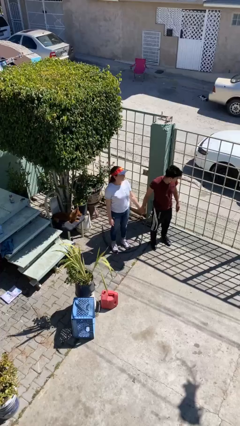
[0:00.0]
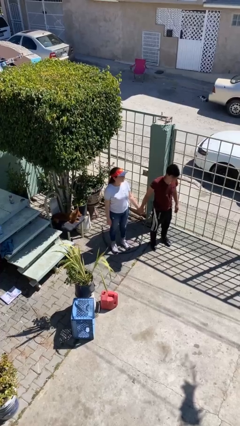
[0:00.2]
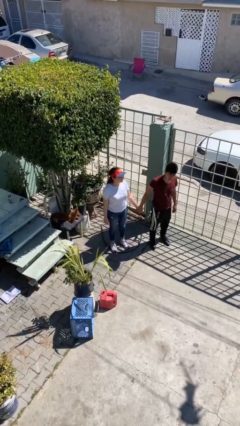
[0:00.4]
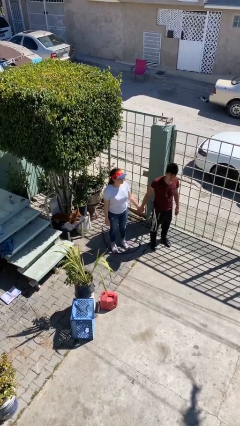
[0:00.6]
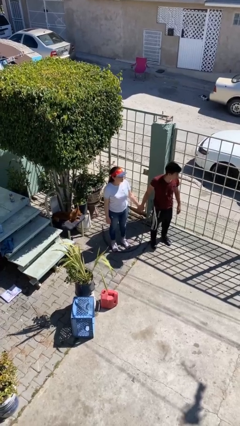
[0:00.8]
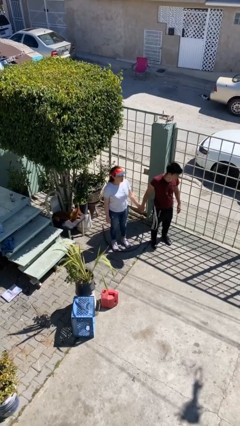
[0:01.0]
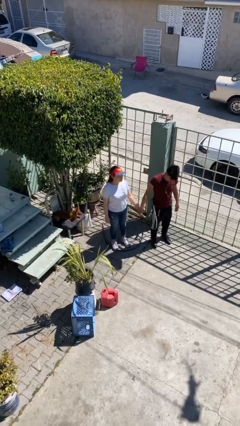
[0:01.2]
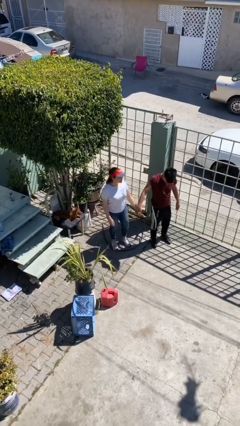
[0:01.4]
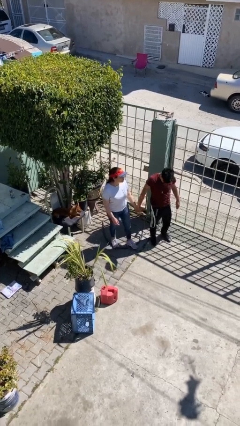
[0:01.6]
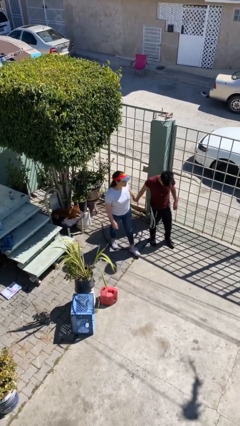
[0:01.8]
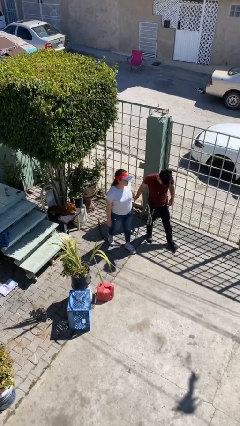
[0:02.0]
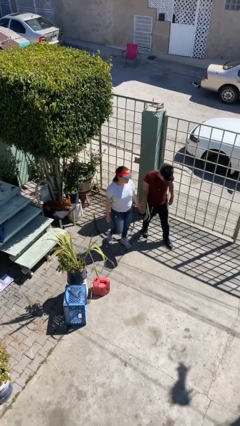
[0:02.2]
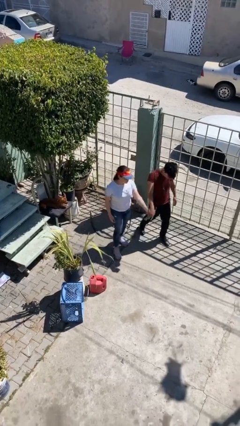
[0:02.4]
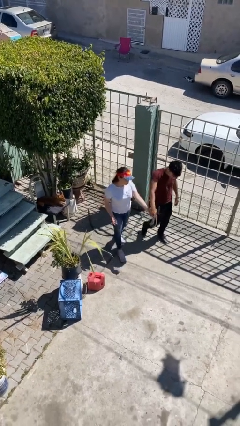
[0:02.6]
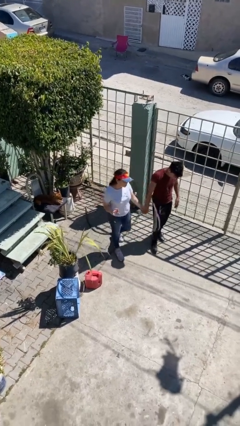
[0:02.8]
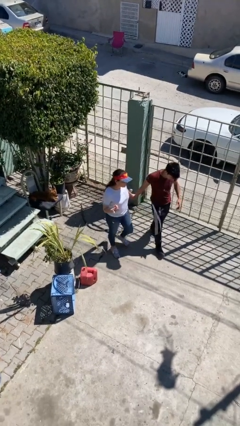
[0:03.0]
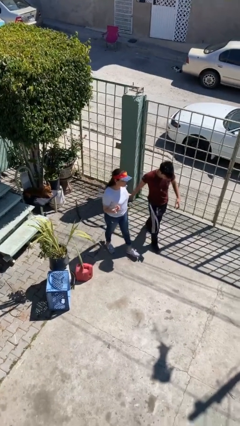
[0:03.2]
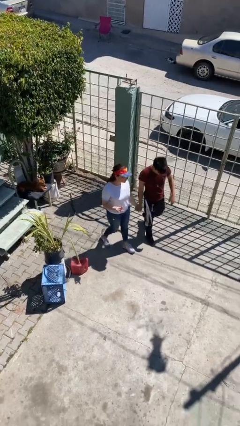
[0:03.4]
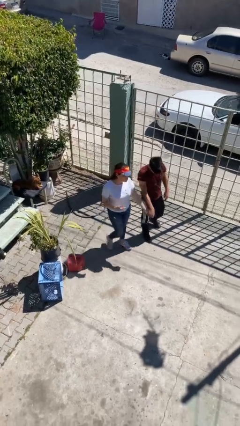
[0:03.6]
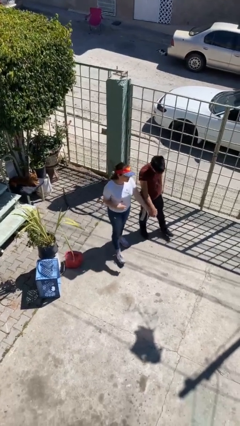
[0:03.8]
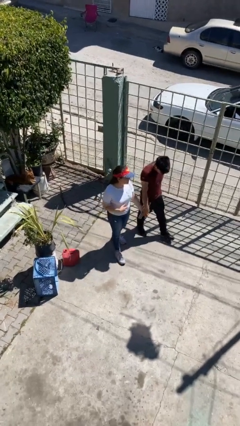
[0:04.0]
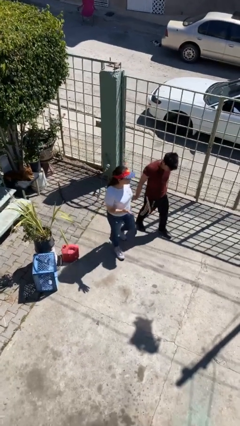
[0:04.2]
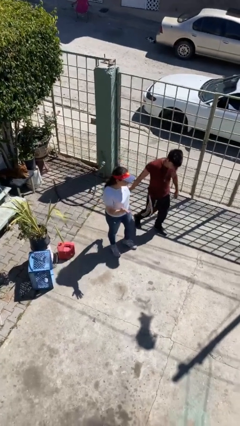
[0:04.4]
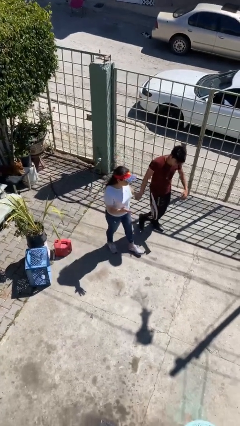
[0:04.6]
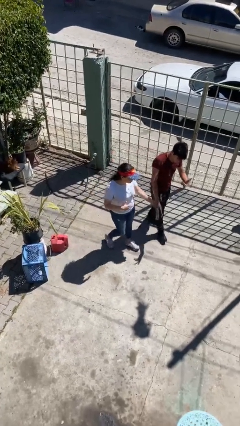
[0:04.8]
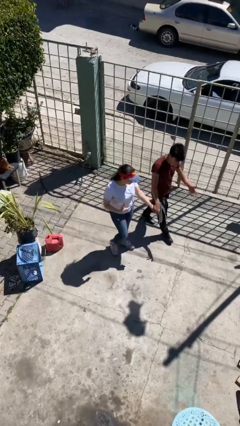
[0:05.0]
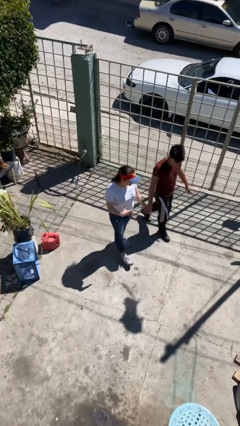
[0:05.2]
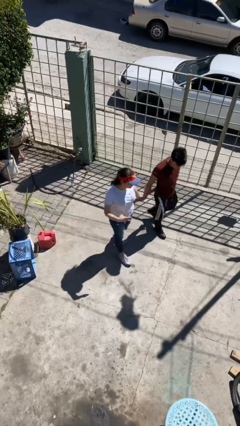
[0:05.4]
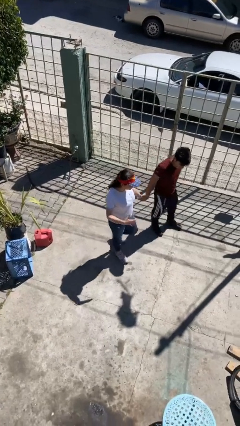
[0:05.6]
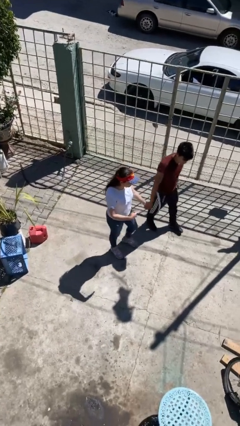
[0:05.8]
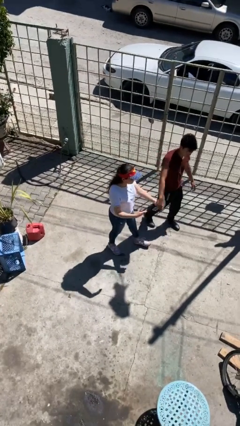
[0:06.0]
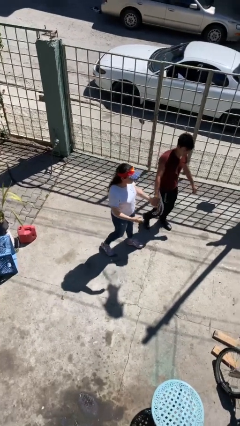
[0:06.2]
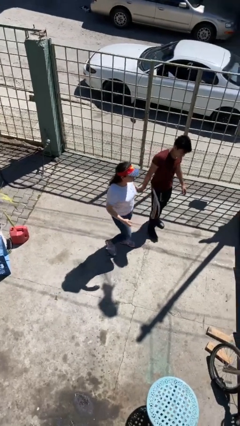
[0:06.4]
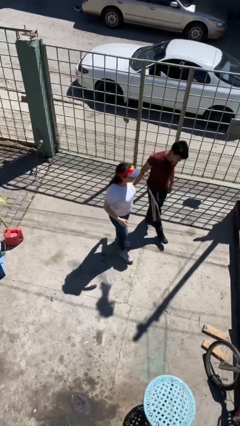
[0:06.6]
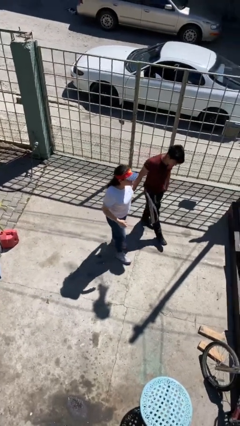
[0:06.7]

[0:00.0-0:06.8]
person holds hand

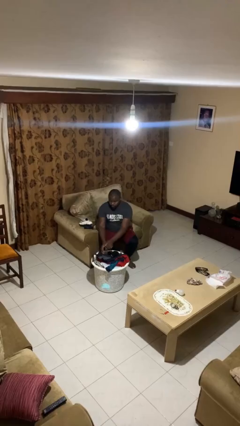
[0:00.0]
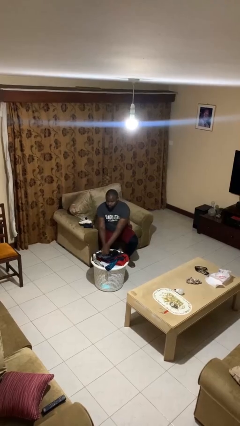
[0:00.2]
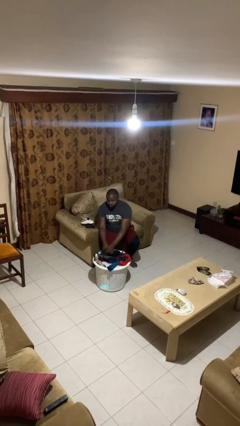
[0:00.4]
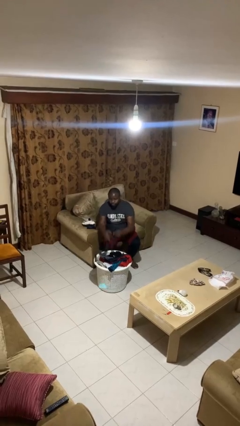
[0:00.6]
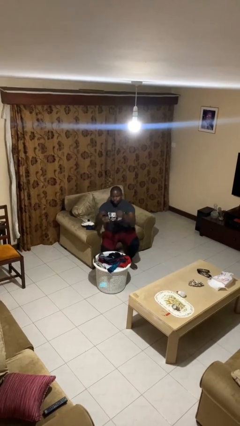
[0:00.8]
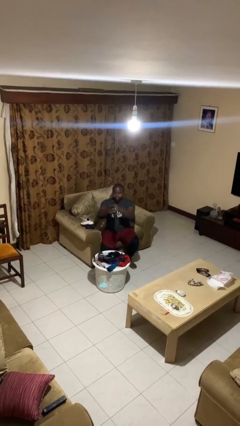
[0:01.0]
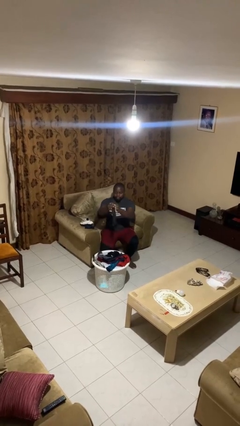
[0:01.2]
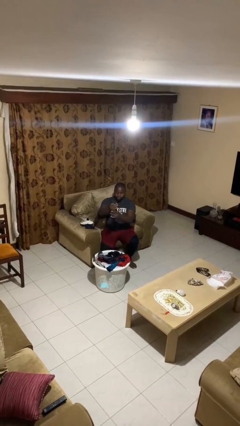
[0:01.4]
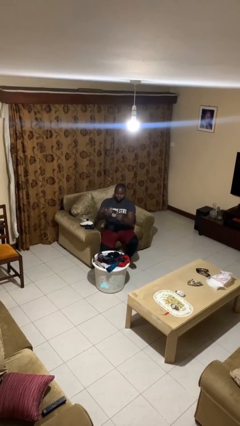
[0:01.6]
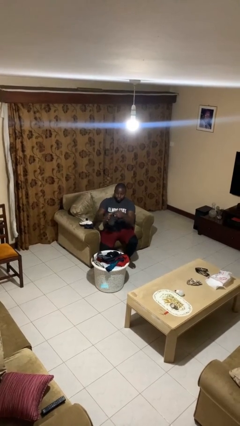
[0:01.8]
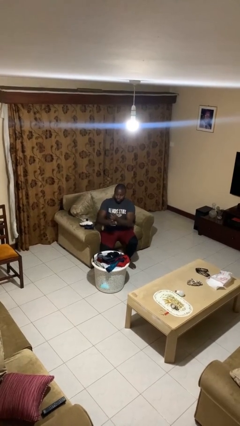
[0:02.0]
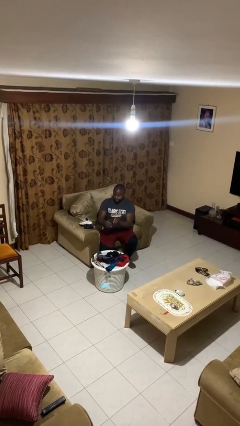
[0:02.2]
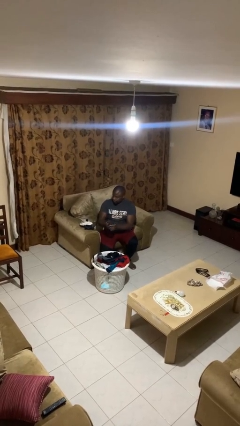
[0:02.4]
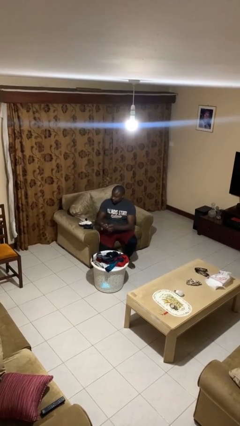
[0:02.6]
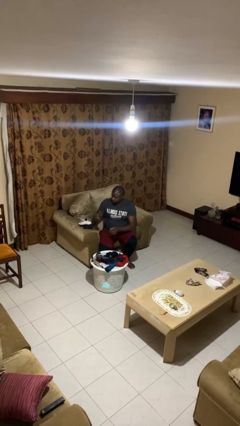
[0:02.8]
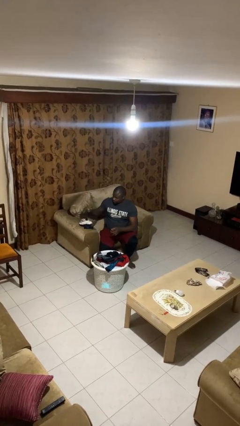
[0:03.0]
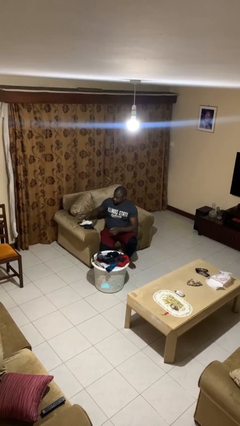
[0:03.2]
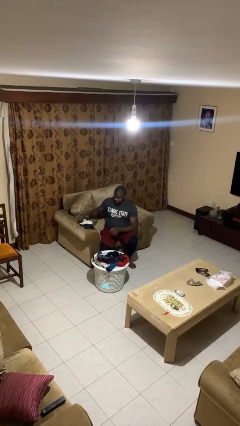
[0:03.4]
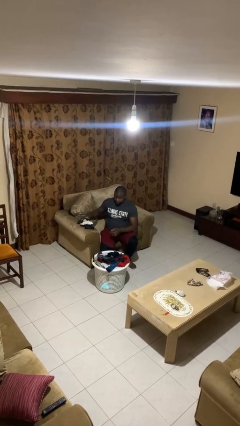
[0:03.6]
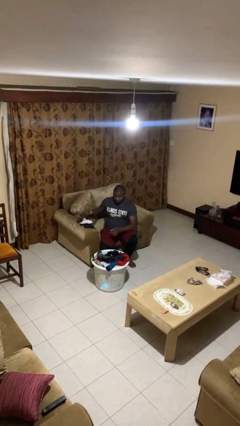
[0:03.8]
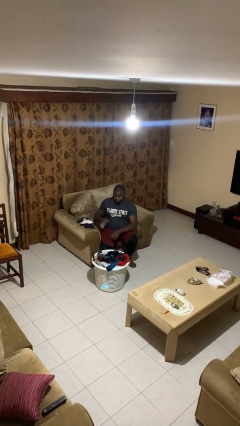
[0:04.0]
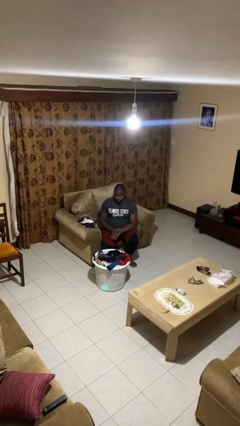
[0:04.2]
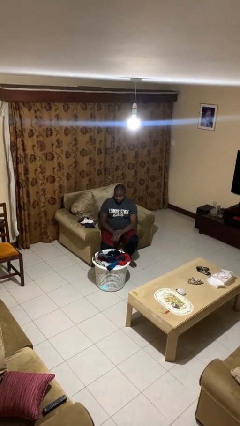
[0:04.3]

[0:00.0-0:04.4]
person folds socks

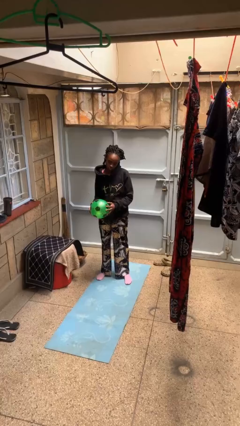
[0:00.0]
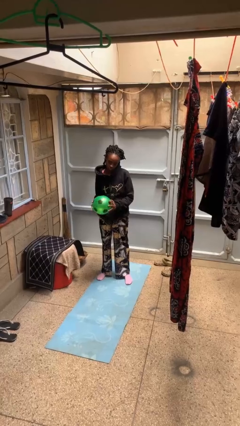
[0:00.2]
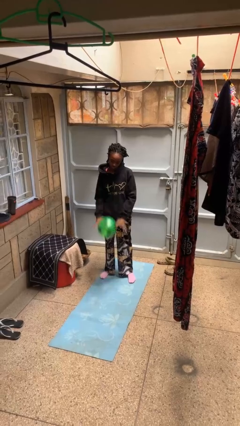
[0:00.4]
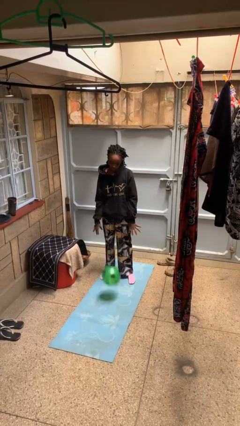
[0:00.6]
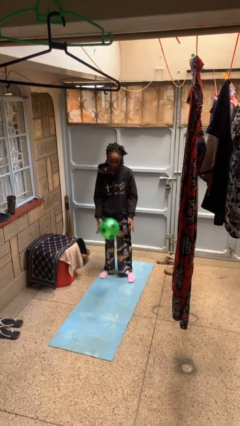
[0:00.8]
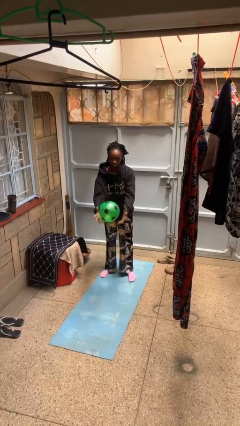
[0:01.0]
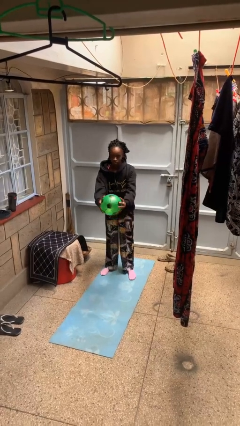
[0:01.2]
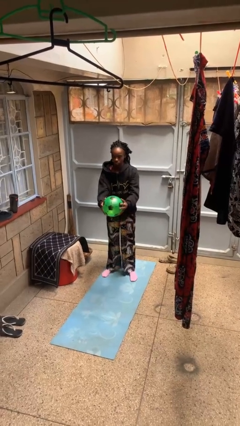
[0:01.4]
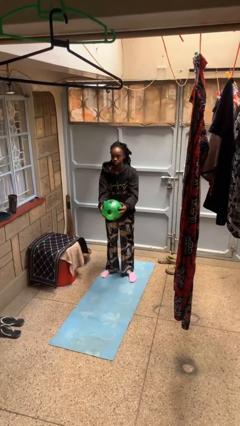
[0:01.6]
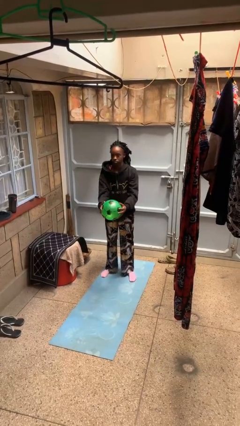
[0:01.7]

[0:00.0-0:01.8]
person bounces ball on floor

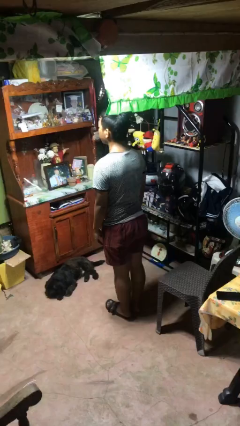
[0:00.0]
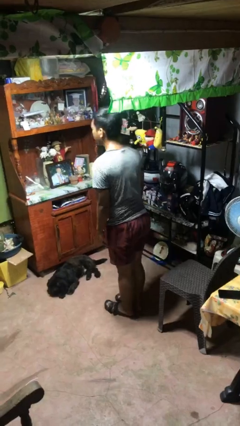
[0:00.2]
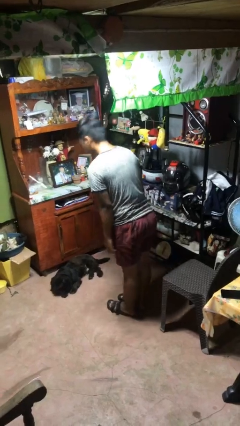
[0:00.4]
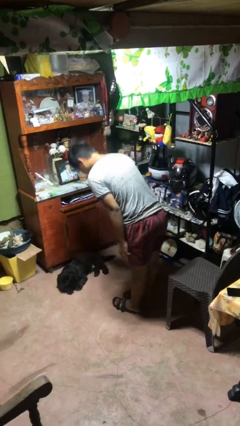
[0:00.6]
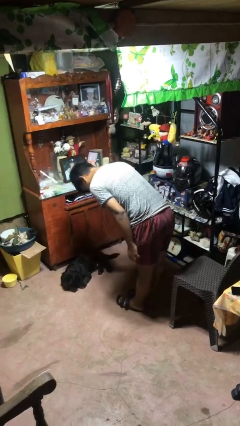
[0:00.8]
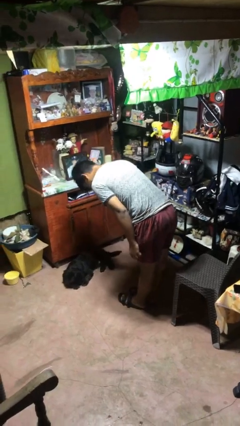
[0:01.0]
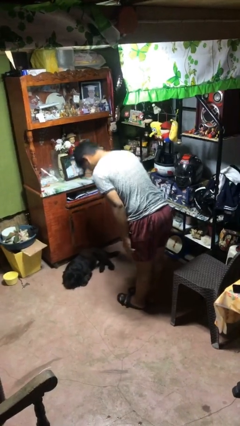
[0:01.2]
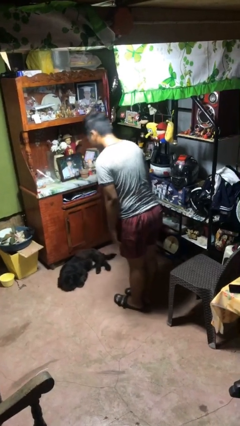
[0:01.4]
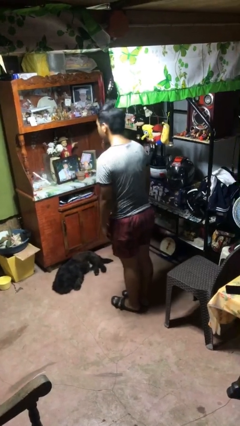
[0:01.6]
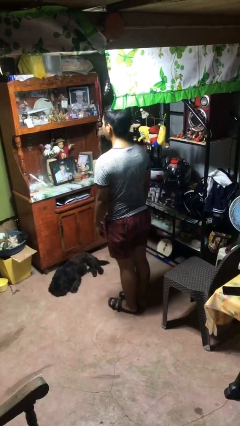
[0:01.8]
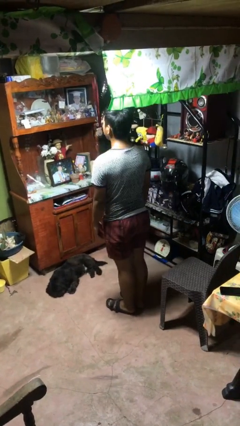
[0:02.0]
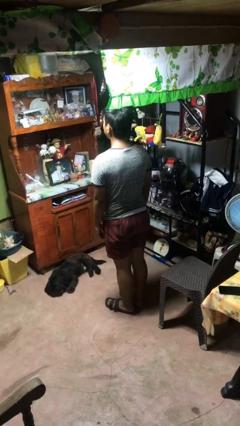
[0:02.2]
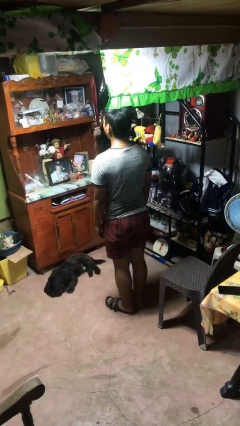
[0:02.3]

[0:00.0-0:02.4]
person bows

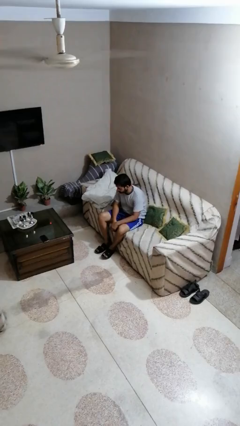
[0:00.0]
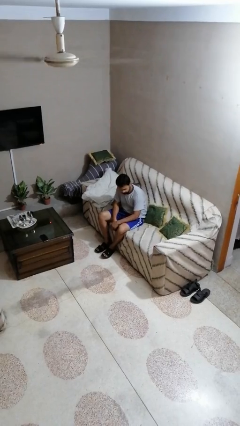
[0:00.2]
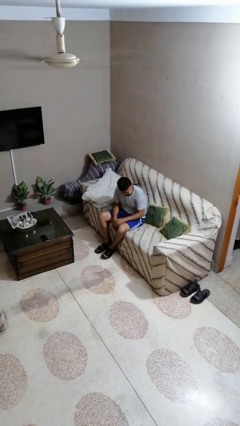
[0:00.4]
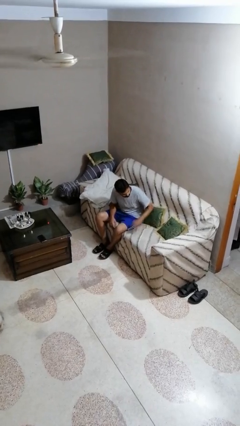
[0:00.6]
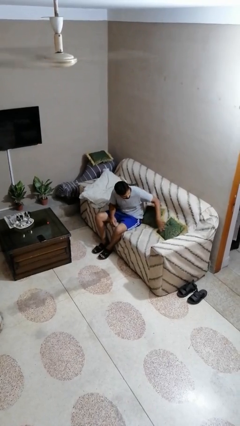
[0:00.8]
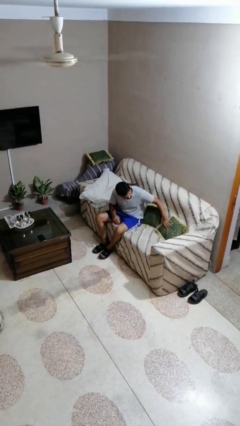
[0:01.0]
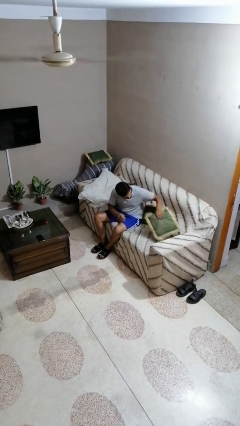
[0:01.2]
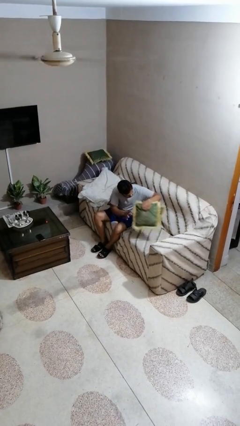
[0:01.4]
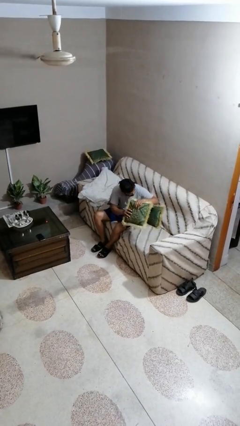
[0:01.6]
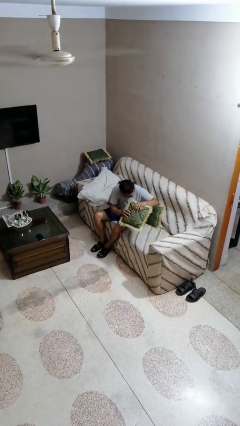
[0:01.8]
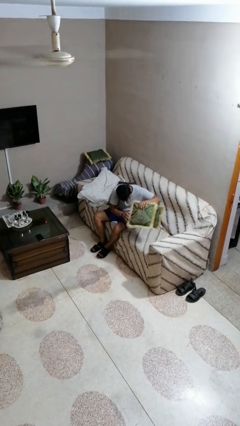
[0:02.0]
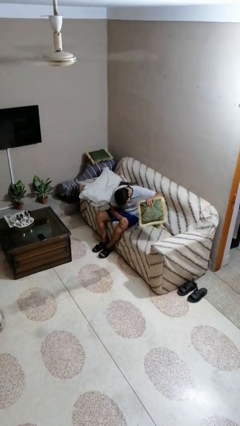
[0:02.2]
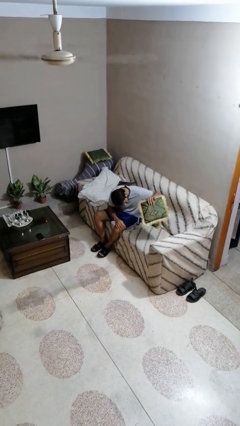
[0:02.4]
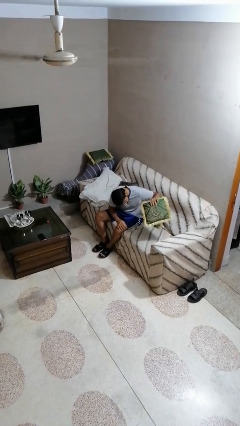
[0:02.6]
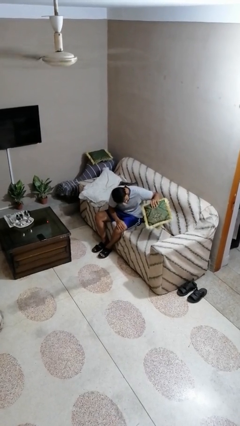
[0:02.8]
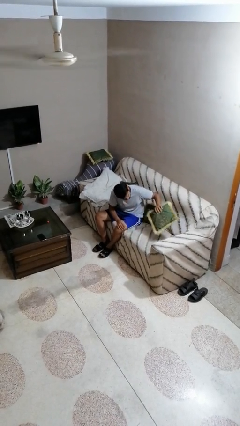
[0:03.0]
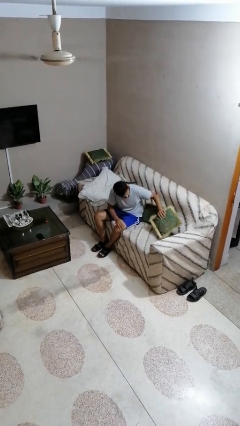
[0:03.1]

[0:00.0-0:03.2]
person searches in couch
